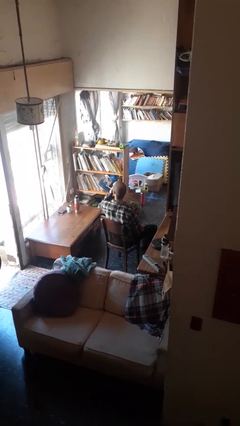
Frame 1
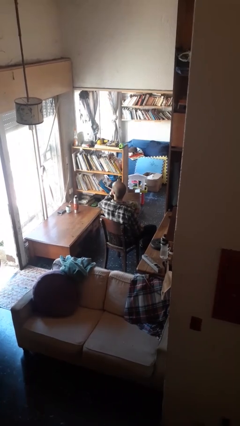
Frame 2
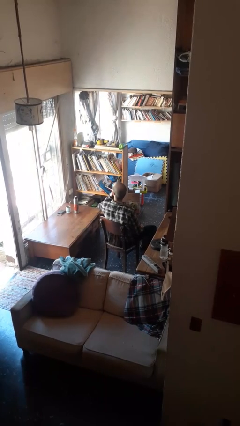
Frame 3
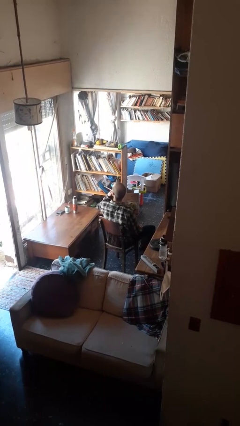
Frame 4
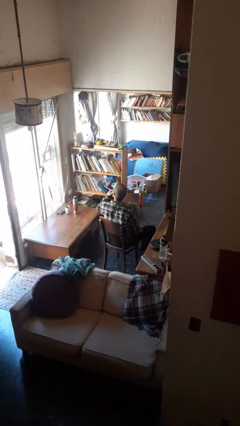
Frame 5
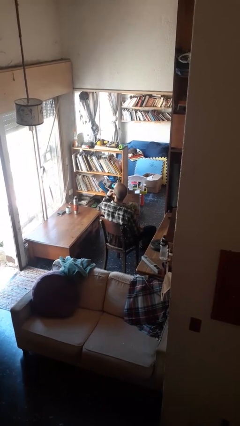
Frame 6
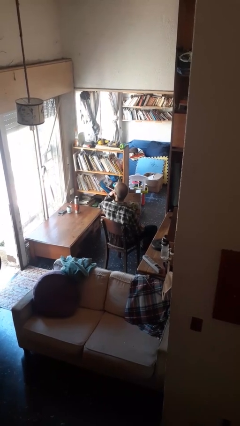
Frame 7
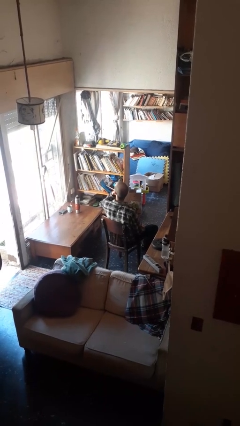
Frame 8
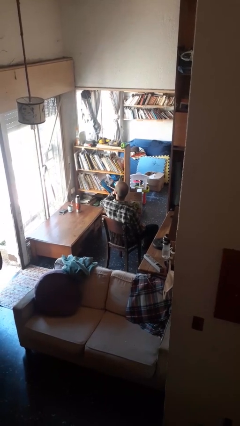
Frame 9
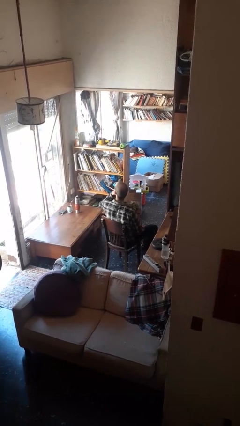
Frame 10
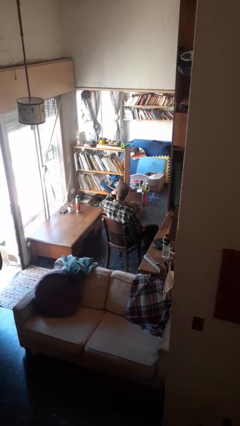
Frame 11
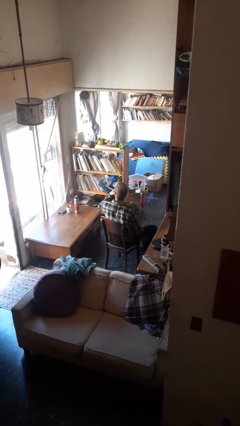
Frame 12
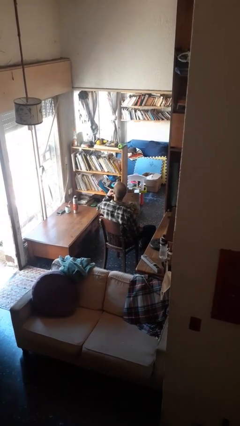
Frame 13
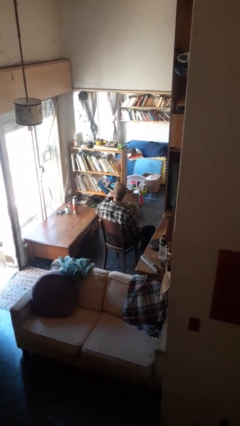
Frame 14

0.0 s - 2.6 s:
person strokes chin

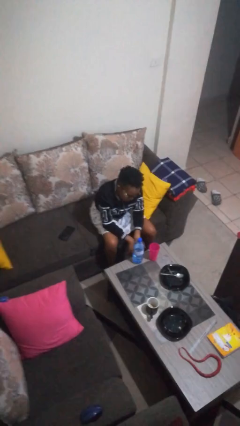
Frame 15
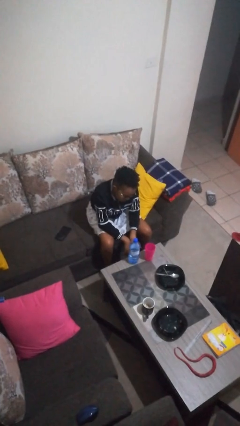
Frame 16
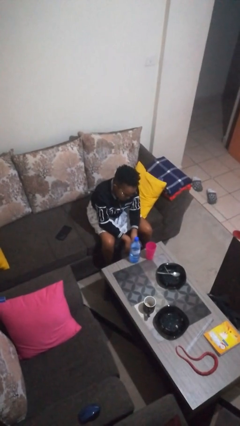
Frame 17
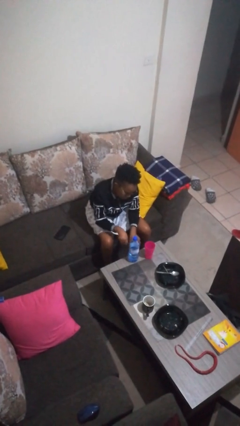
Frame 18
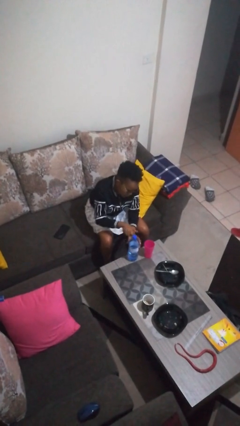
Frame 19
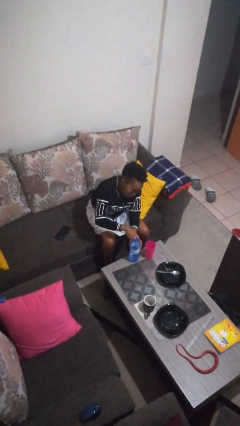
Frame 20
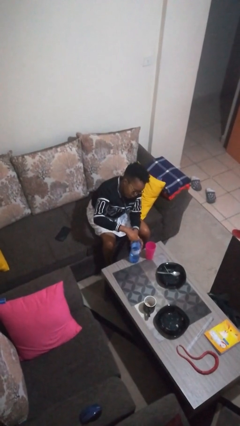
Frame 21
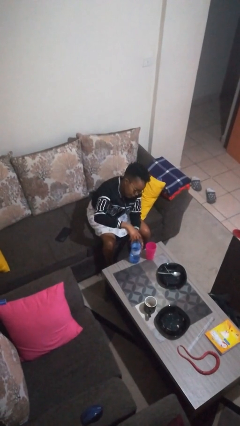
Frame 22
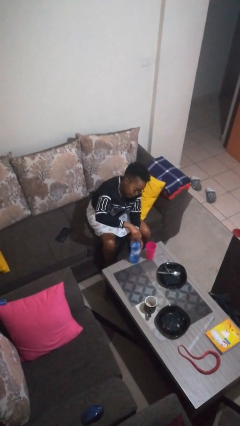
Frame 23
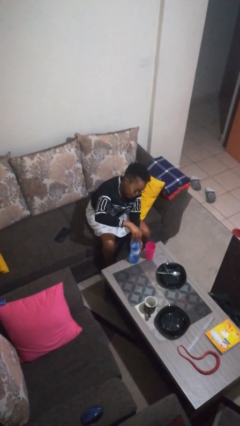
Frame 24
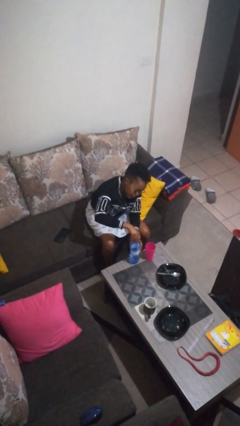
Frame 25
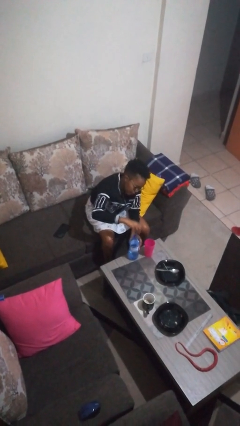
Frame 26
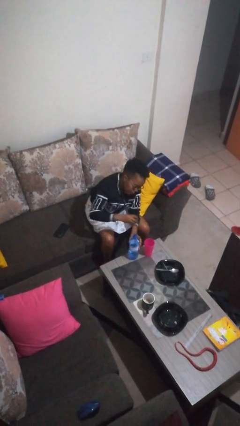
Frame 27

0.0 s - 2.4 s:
person unscrews lid from bottle

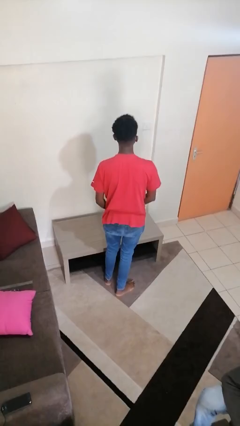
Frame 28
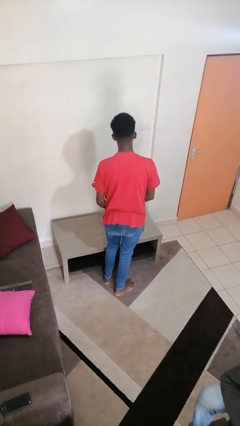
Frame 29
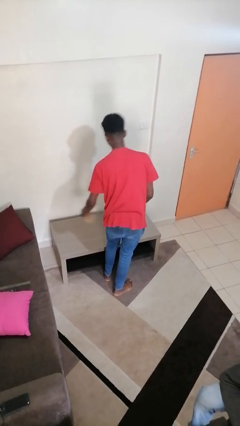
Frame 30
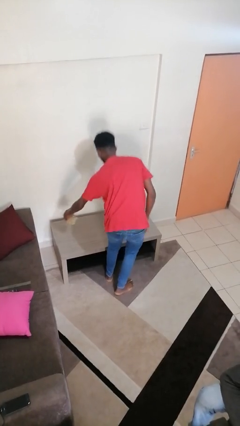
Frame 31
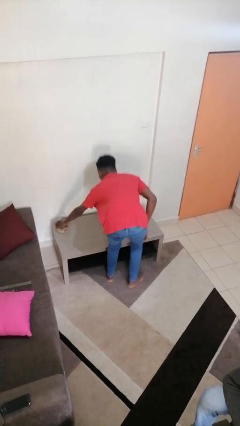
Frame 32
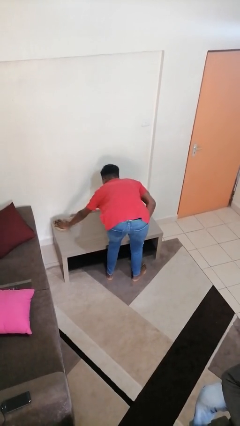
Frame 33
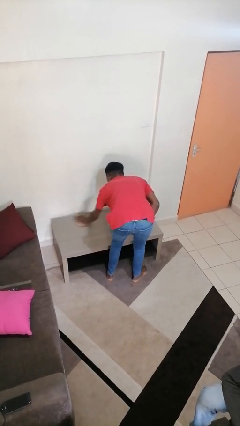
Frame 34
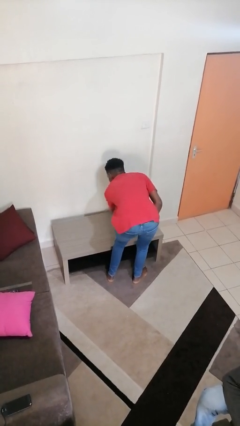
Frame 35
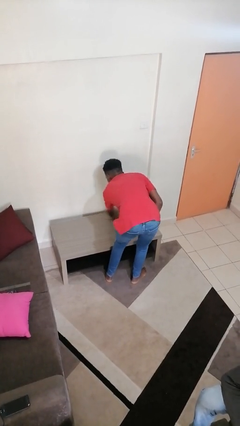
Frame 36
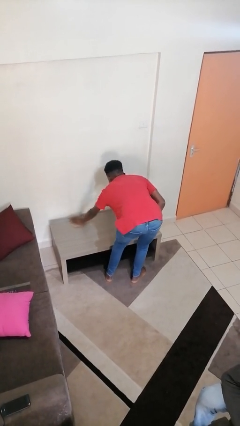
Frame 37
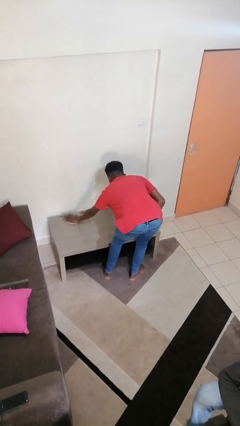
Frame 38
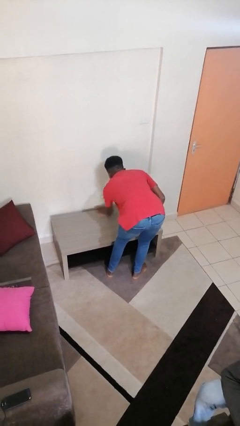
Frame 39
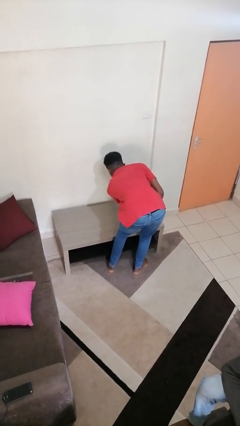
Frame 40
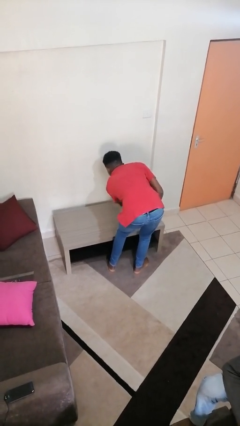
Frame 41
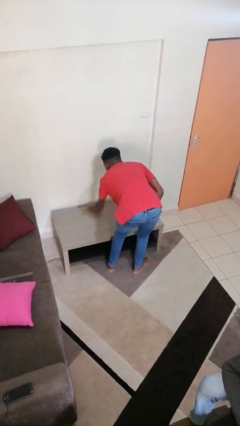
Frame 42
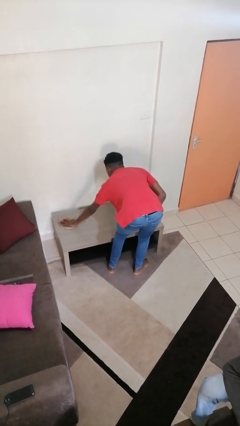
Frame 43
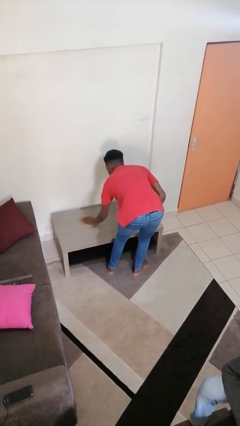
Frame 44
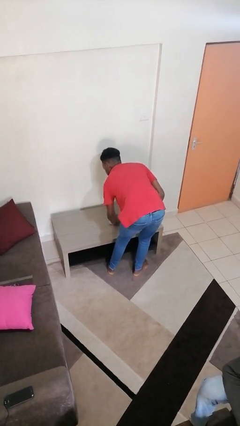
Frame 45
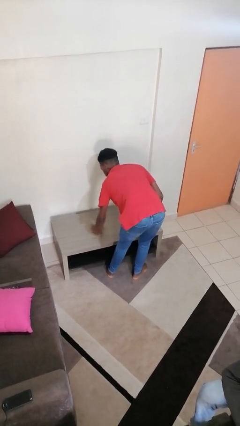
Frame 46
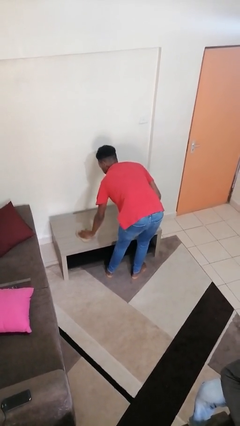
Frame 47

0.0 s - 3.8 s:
person cleans table with rag

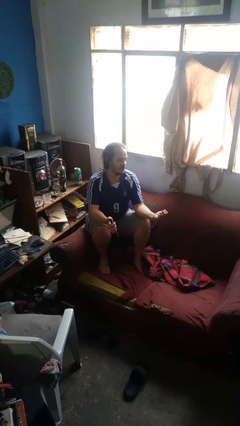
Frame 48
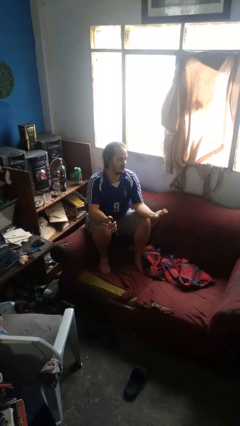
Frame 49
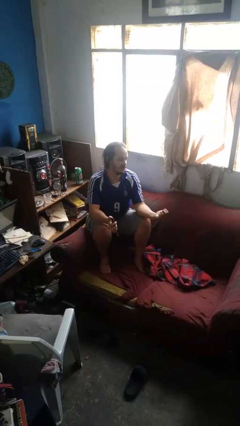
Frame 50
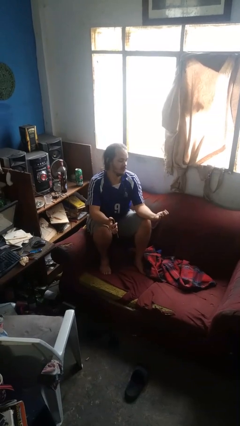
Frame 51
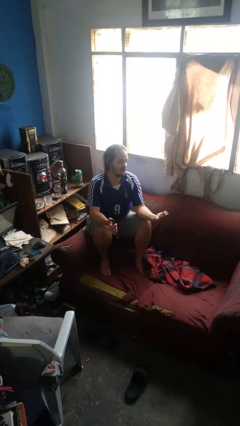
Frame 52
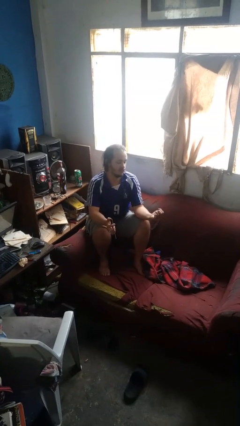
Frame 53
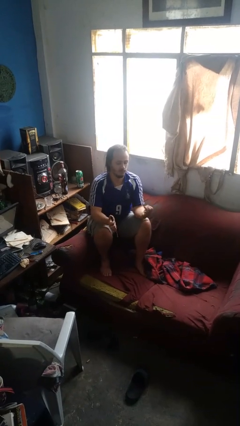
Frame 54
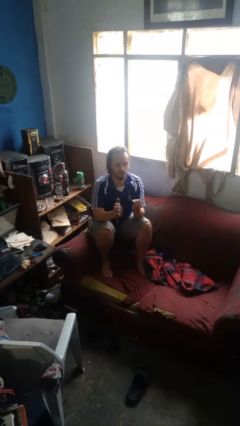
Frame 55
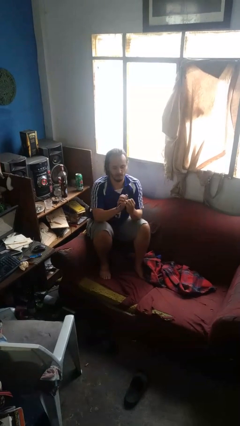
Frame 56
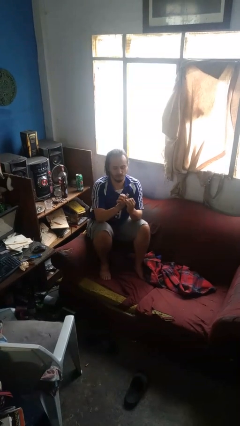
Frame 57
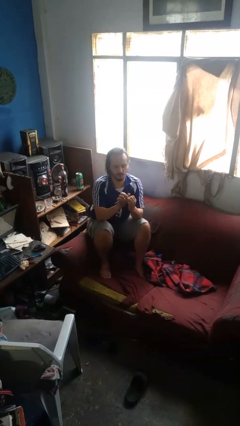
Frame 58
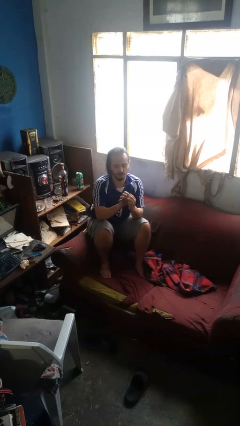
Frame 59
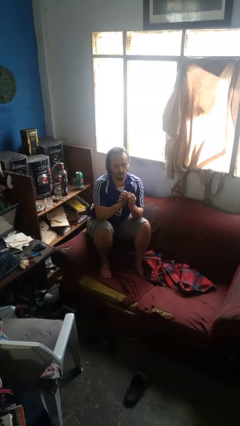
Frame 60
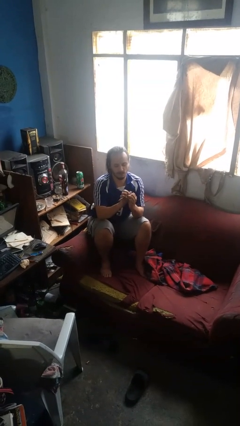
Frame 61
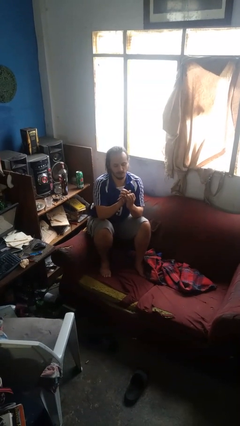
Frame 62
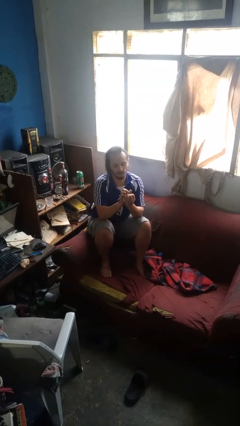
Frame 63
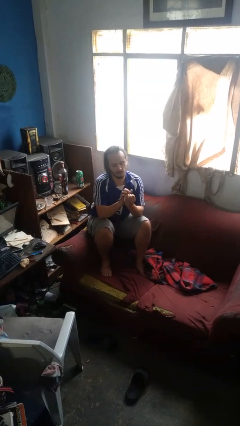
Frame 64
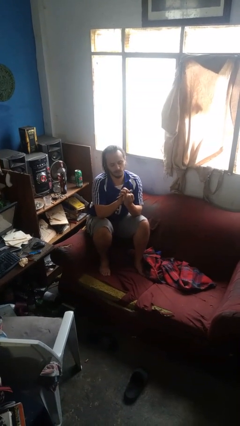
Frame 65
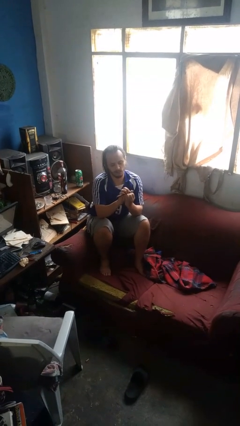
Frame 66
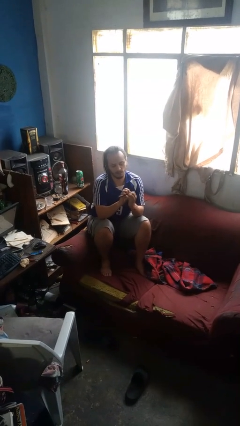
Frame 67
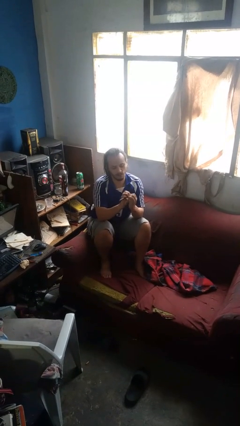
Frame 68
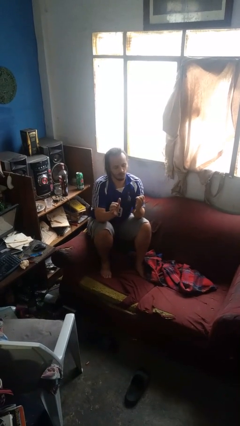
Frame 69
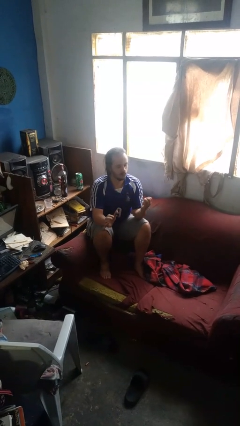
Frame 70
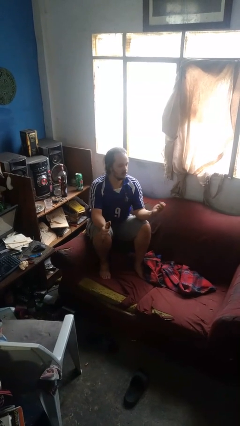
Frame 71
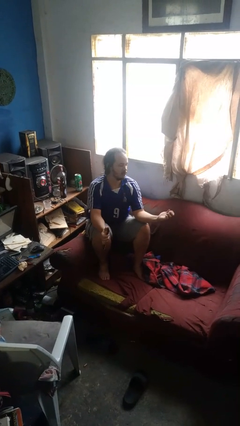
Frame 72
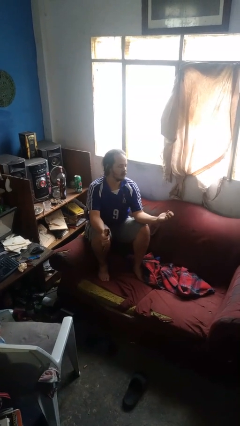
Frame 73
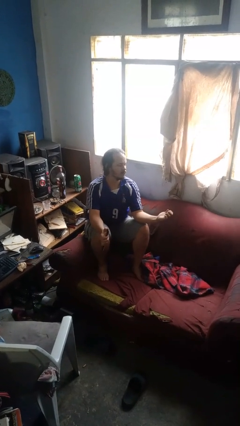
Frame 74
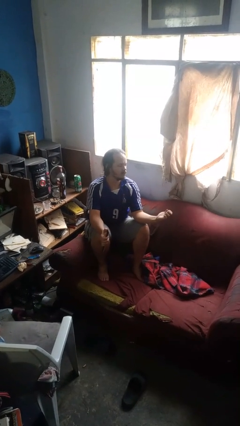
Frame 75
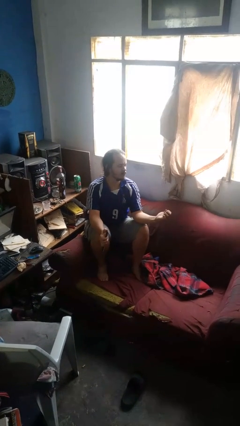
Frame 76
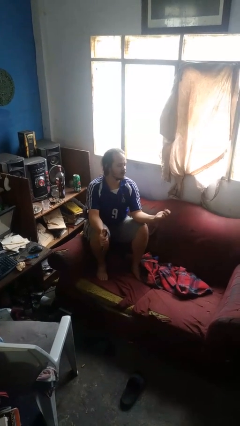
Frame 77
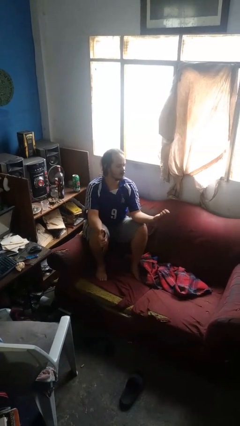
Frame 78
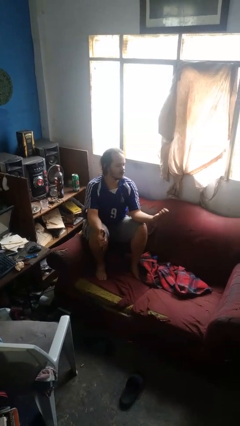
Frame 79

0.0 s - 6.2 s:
person files fingernails

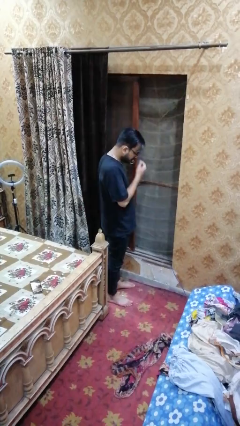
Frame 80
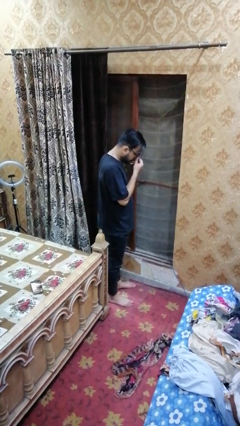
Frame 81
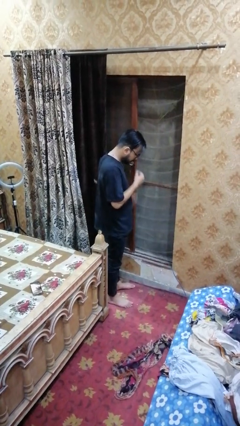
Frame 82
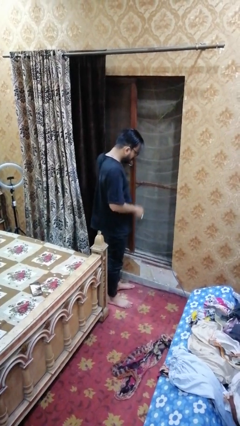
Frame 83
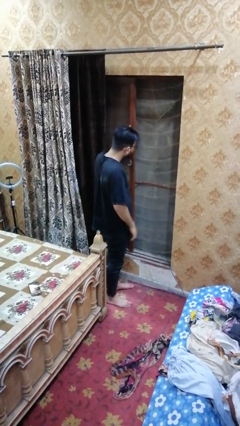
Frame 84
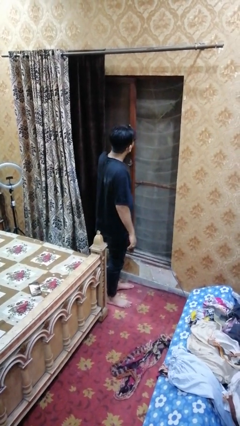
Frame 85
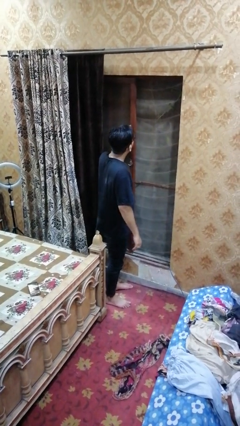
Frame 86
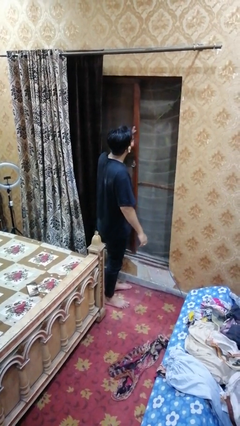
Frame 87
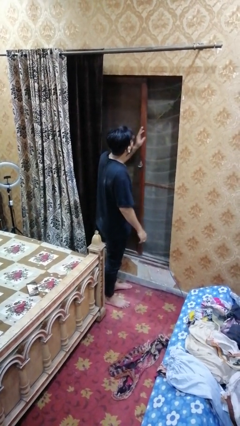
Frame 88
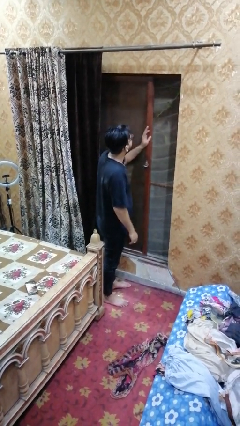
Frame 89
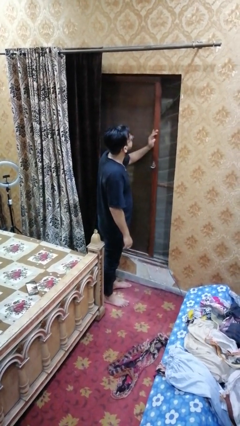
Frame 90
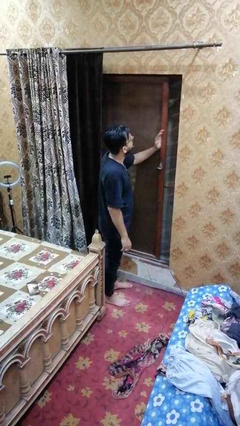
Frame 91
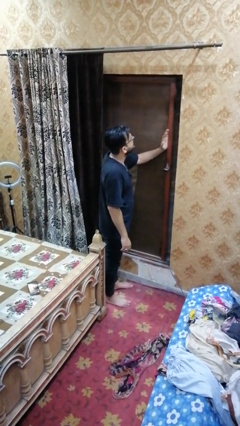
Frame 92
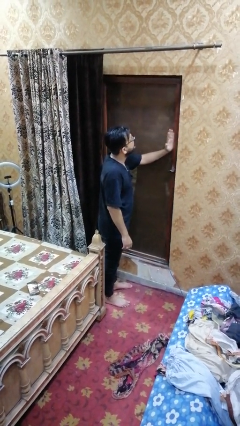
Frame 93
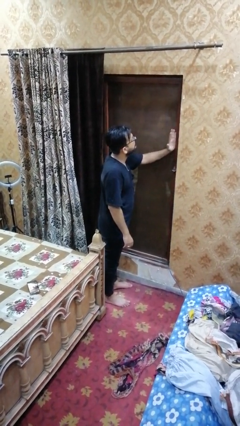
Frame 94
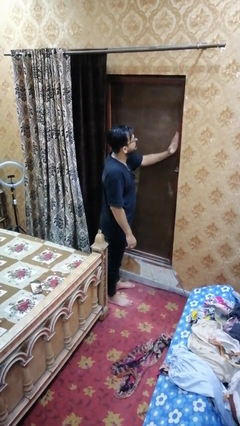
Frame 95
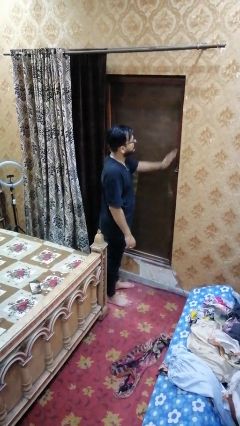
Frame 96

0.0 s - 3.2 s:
person closes sliding door
